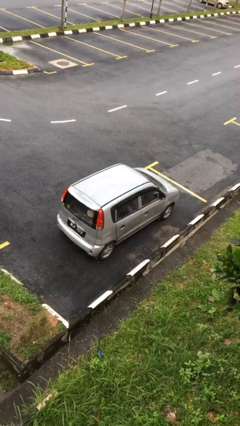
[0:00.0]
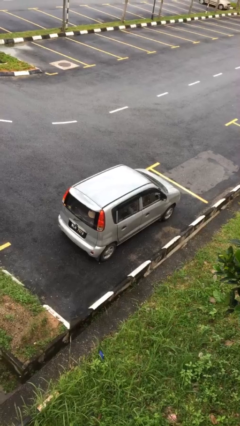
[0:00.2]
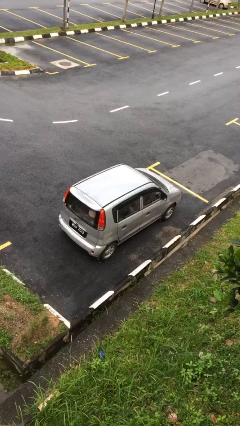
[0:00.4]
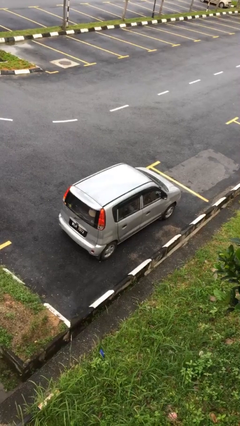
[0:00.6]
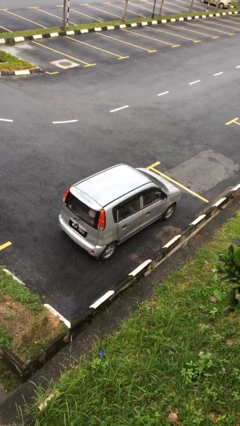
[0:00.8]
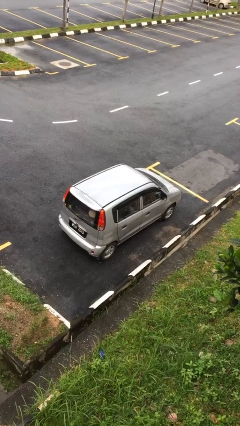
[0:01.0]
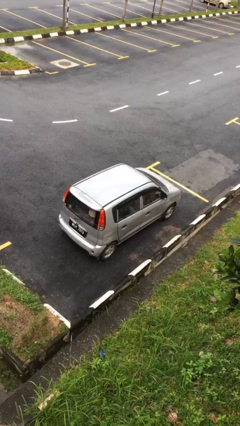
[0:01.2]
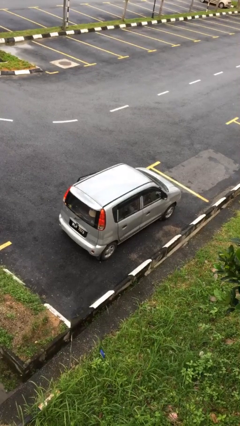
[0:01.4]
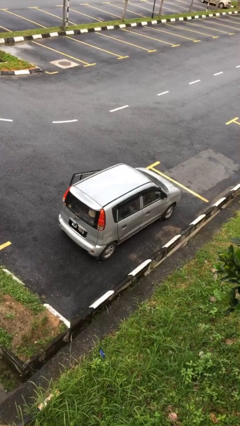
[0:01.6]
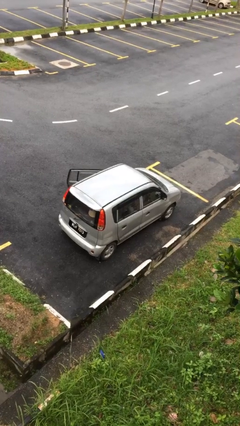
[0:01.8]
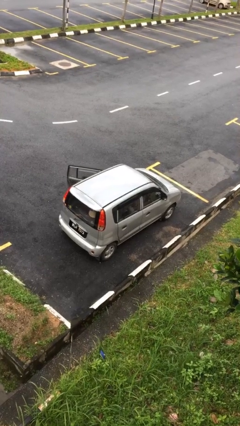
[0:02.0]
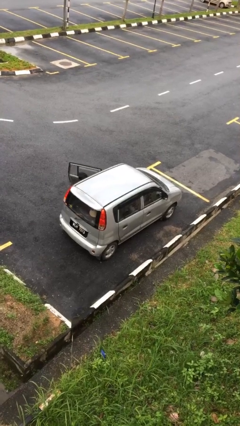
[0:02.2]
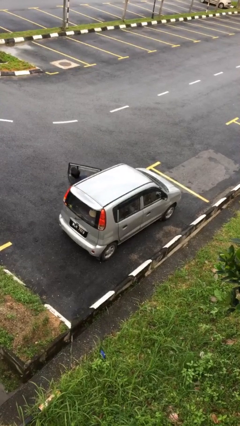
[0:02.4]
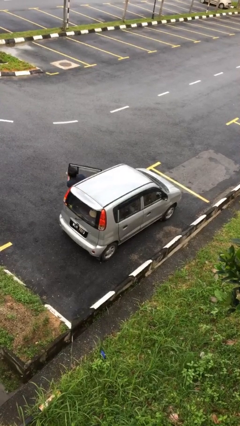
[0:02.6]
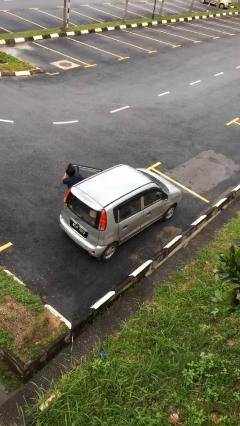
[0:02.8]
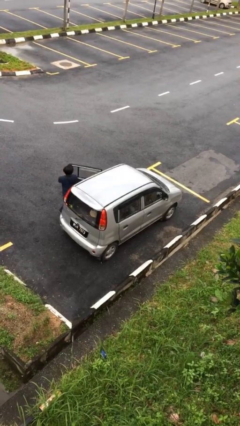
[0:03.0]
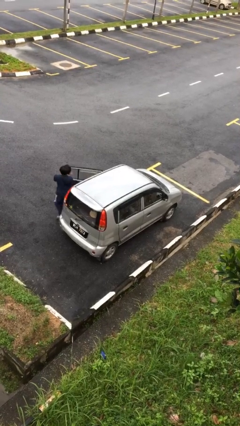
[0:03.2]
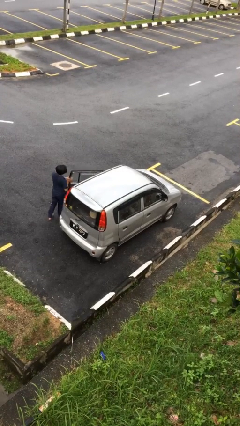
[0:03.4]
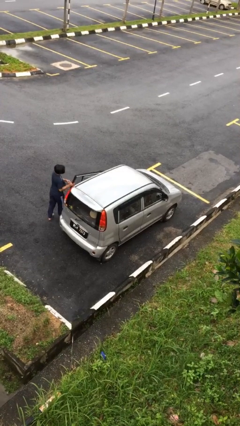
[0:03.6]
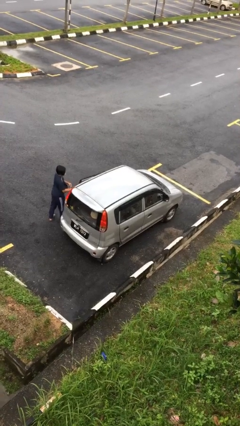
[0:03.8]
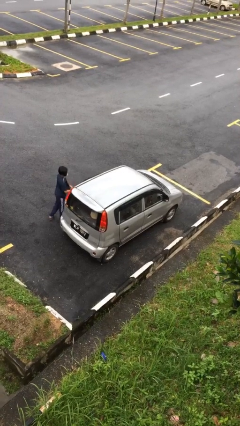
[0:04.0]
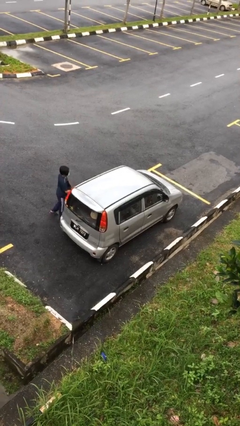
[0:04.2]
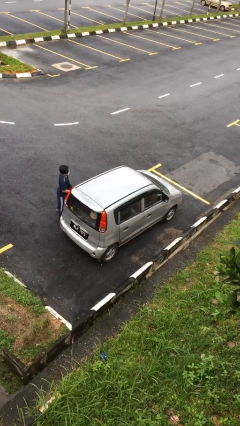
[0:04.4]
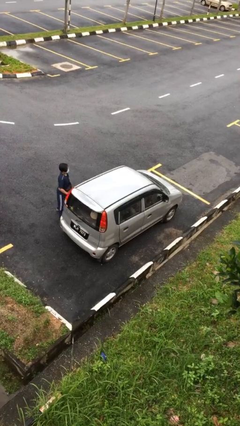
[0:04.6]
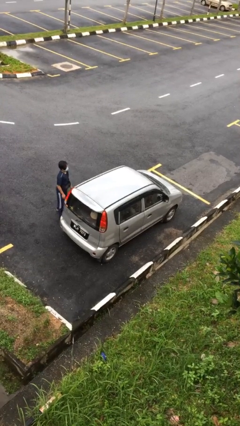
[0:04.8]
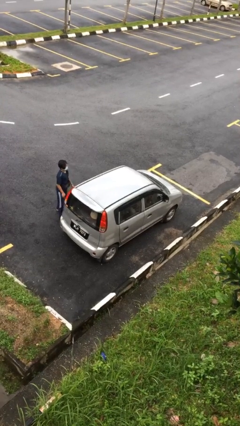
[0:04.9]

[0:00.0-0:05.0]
car drops off person

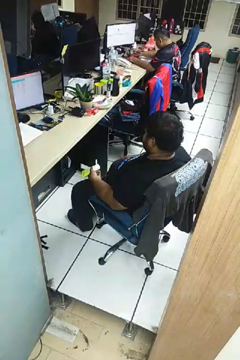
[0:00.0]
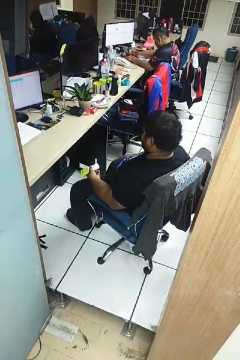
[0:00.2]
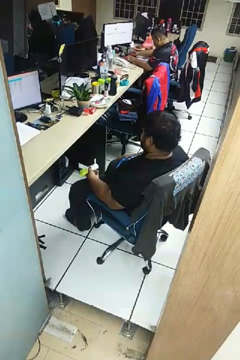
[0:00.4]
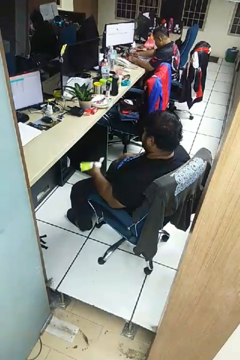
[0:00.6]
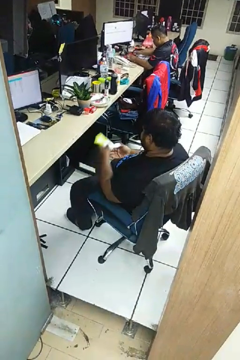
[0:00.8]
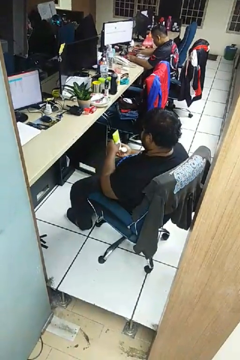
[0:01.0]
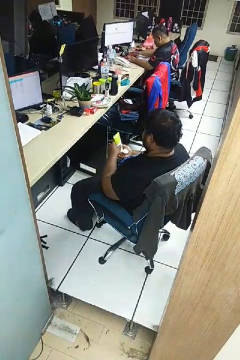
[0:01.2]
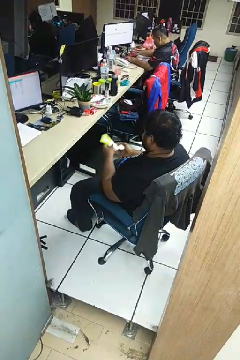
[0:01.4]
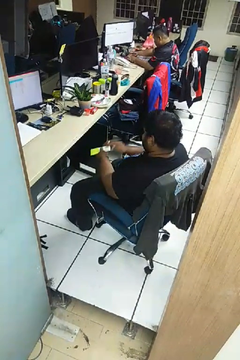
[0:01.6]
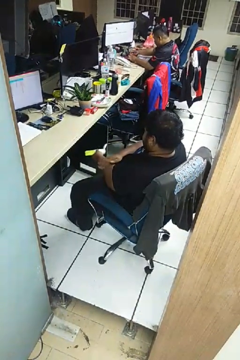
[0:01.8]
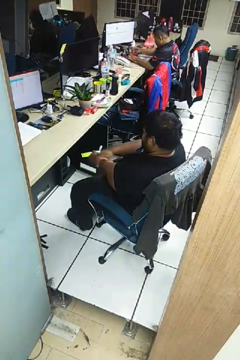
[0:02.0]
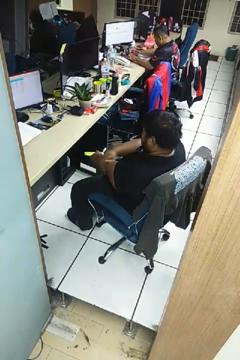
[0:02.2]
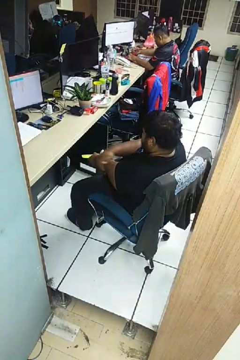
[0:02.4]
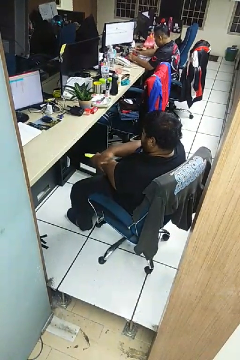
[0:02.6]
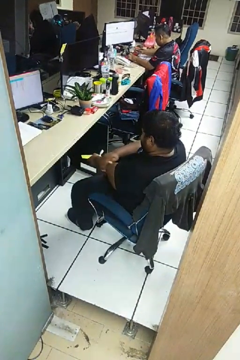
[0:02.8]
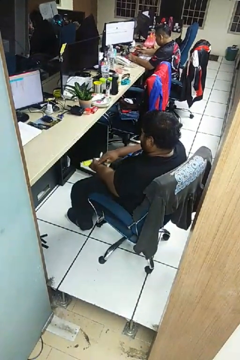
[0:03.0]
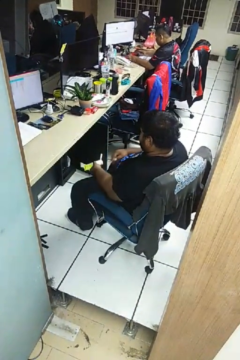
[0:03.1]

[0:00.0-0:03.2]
person applies sunscreen

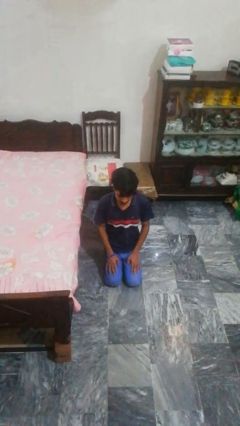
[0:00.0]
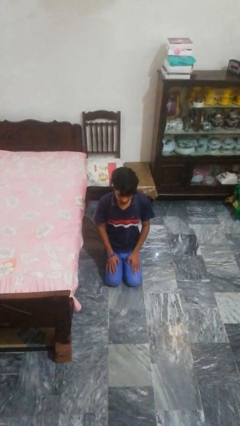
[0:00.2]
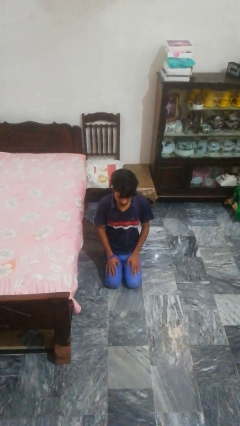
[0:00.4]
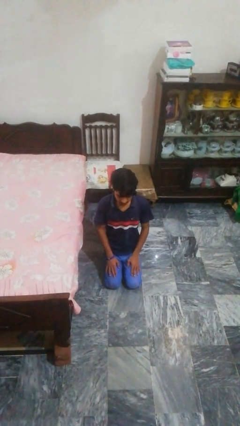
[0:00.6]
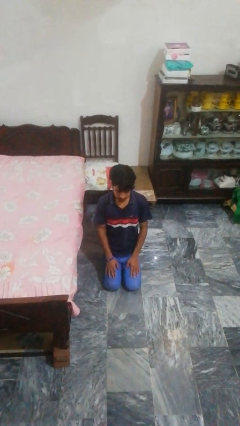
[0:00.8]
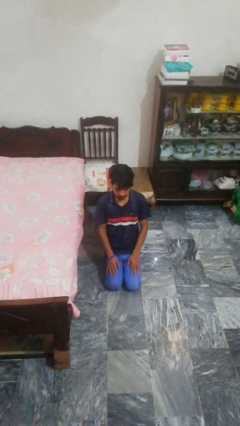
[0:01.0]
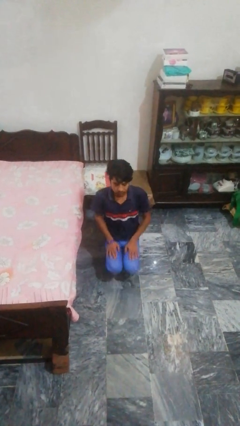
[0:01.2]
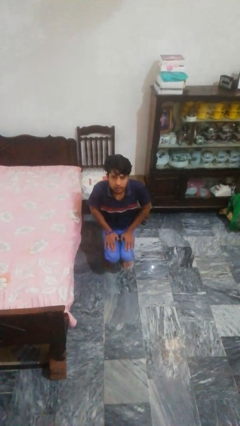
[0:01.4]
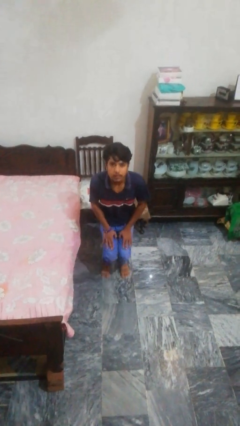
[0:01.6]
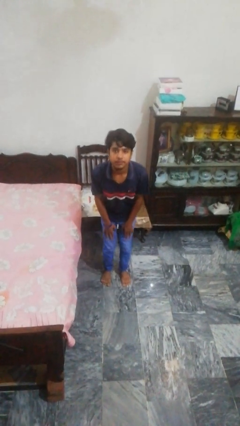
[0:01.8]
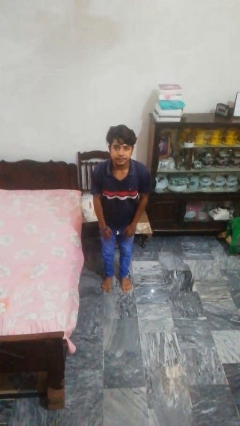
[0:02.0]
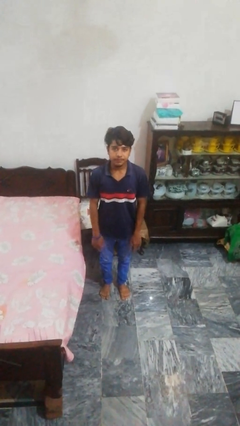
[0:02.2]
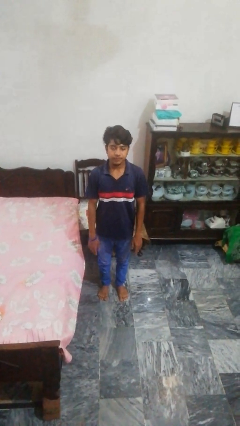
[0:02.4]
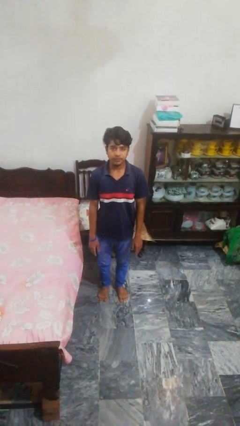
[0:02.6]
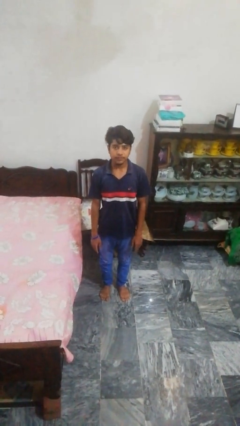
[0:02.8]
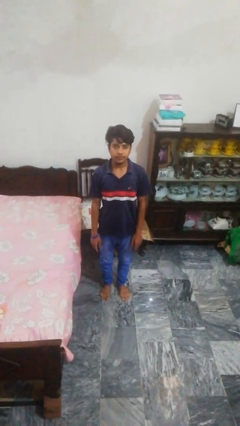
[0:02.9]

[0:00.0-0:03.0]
person stands up from floor

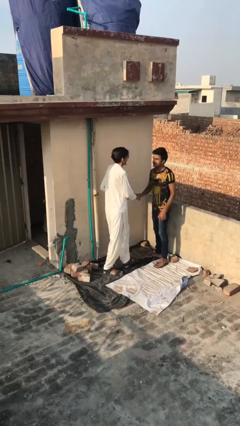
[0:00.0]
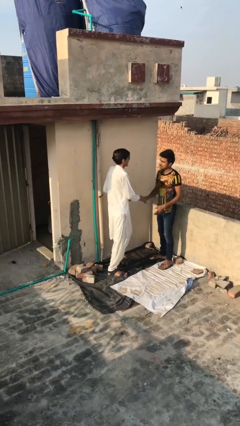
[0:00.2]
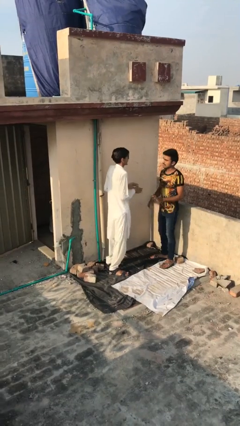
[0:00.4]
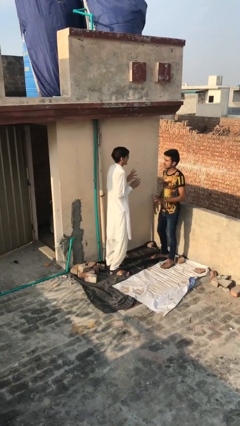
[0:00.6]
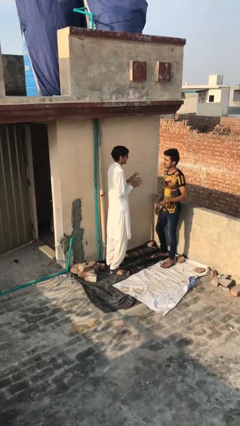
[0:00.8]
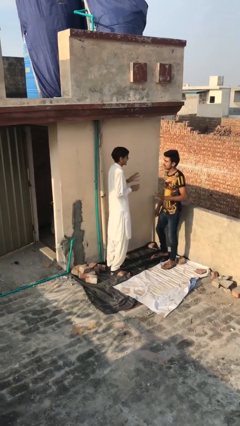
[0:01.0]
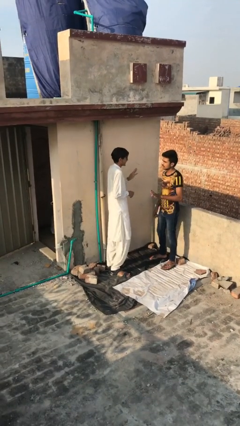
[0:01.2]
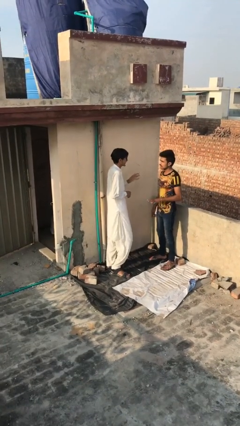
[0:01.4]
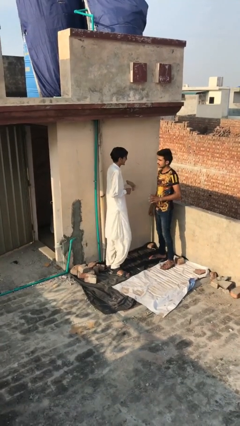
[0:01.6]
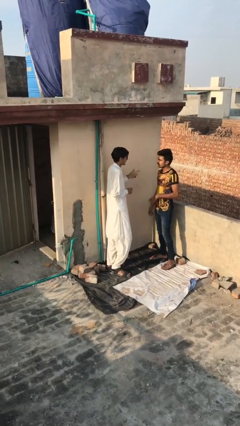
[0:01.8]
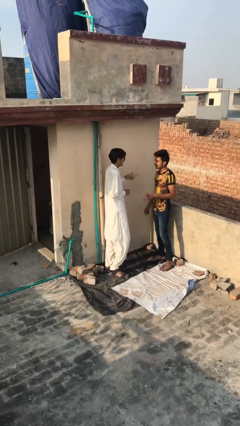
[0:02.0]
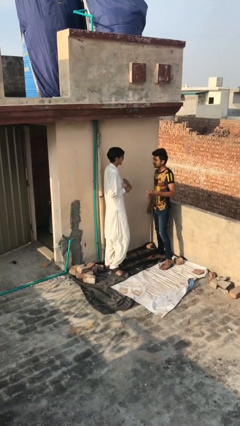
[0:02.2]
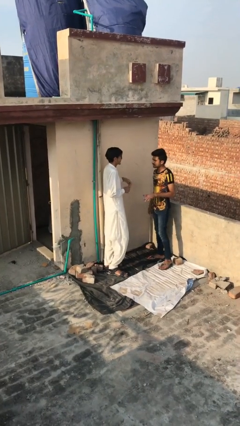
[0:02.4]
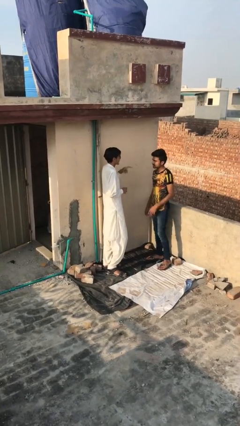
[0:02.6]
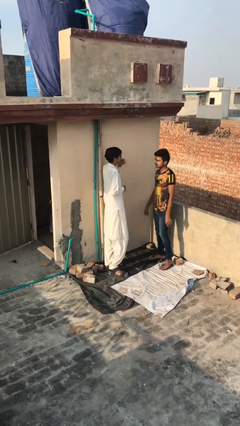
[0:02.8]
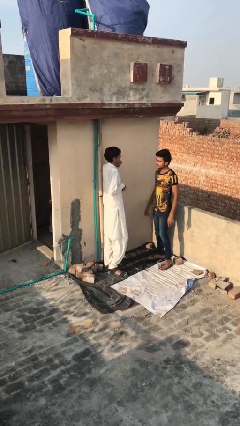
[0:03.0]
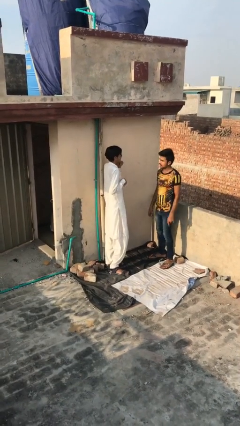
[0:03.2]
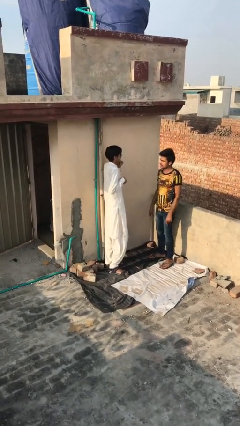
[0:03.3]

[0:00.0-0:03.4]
person talks to person

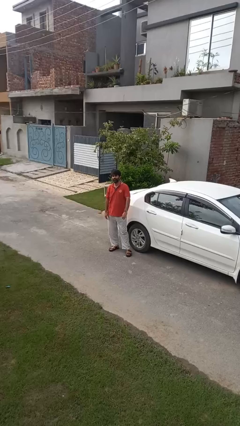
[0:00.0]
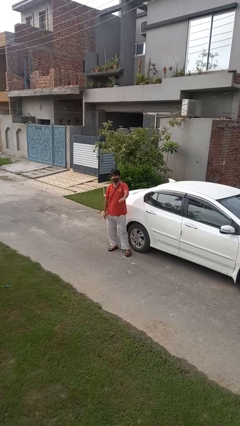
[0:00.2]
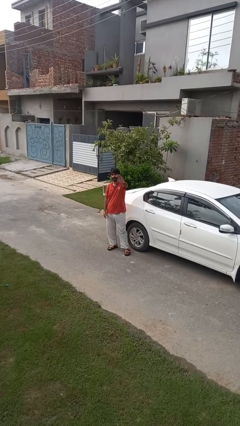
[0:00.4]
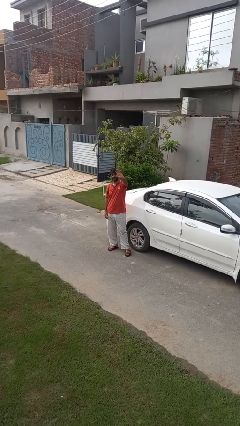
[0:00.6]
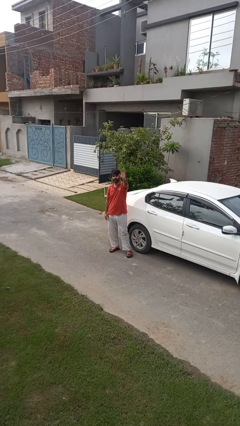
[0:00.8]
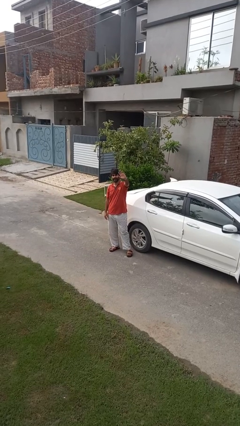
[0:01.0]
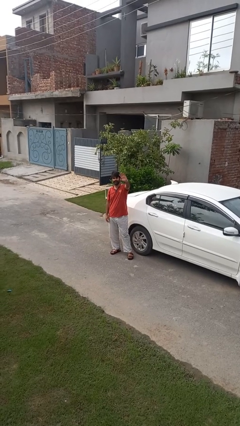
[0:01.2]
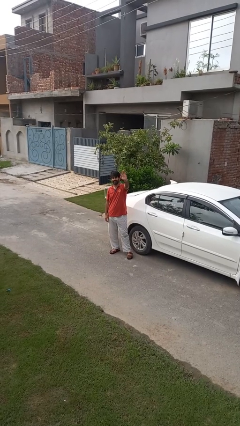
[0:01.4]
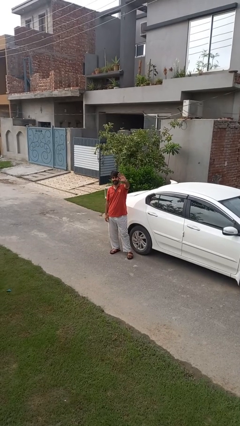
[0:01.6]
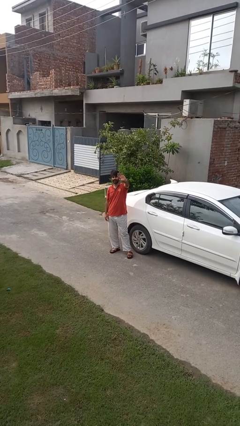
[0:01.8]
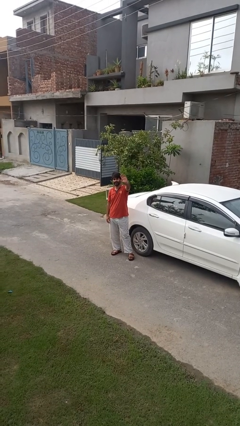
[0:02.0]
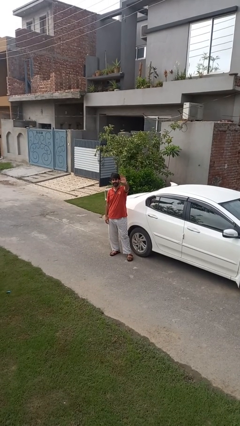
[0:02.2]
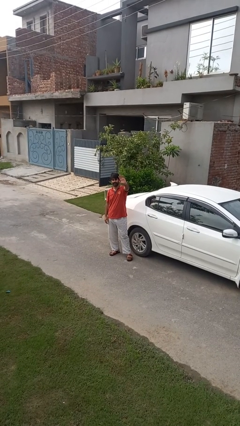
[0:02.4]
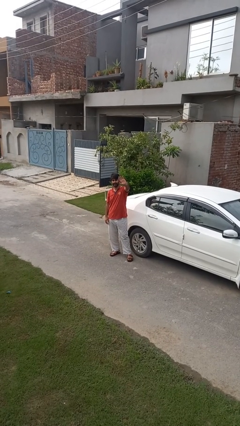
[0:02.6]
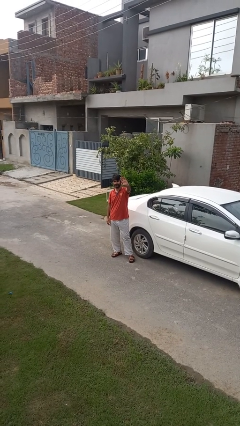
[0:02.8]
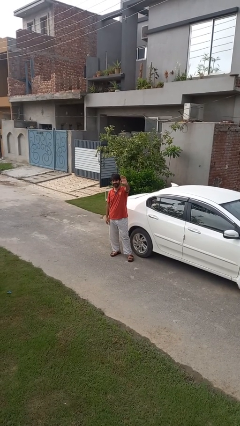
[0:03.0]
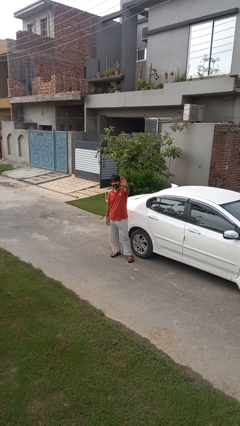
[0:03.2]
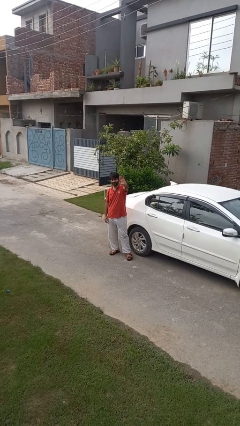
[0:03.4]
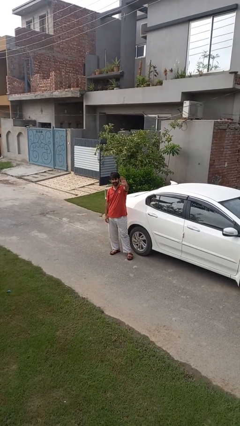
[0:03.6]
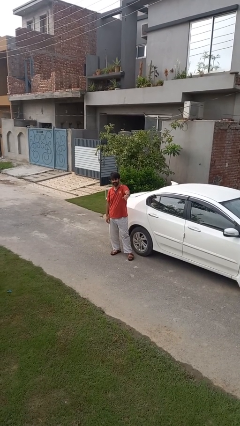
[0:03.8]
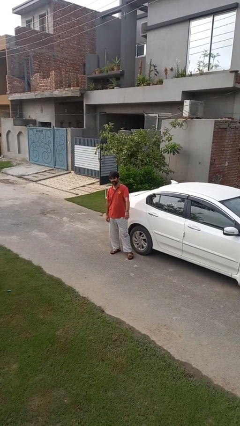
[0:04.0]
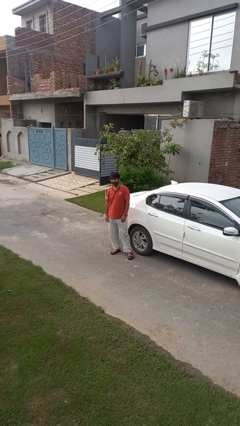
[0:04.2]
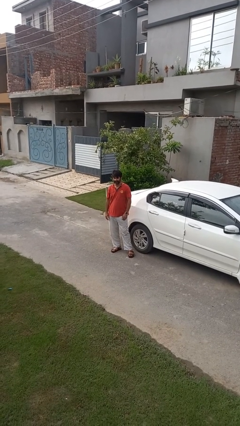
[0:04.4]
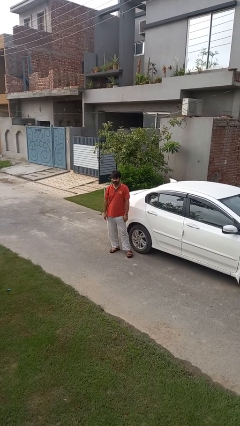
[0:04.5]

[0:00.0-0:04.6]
person waves at person
